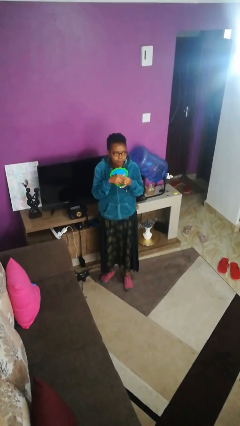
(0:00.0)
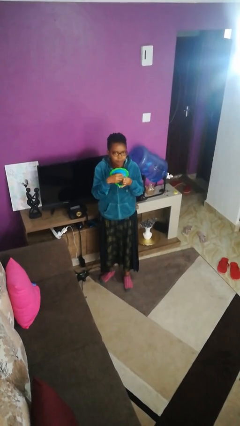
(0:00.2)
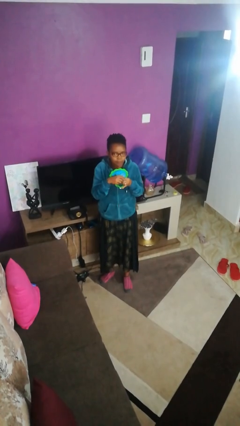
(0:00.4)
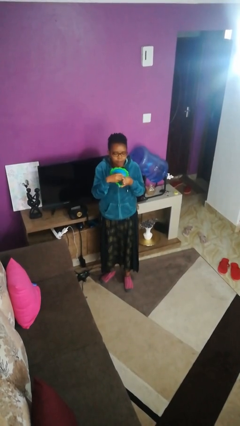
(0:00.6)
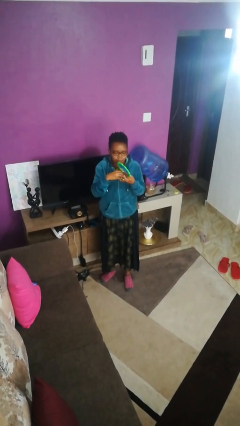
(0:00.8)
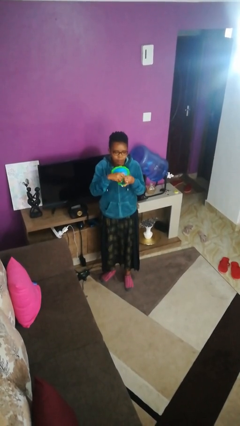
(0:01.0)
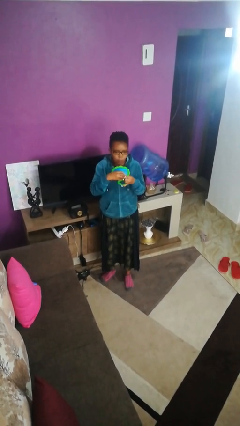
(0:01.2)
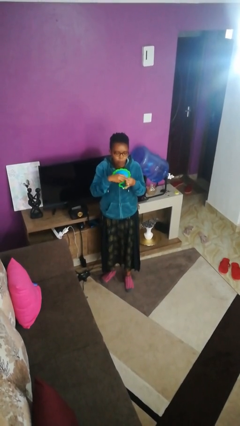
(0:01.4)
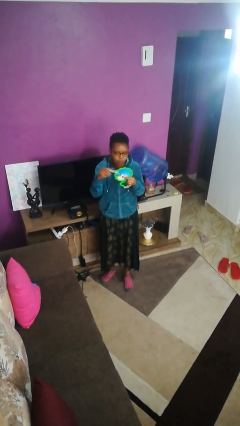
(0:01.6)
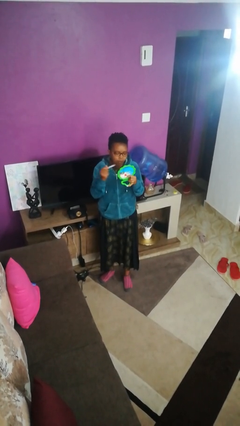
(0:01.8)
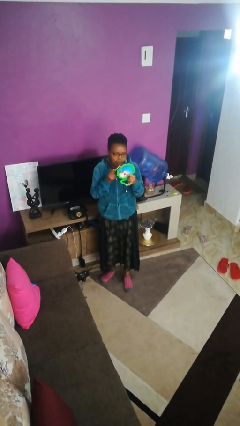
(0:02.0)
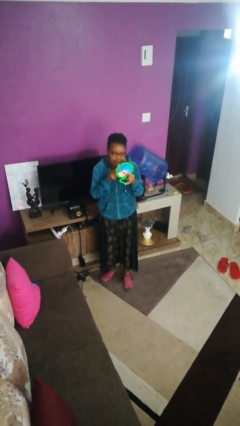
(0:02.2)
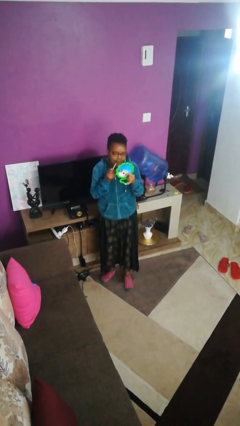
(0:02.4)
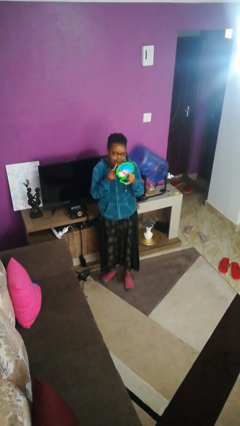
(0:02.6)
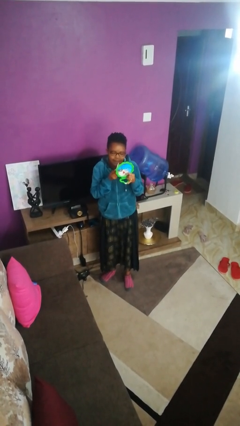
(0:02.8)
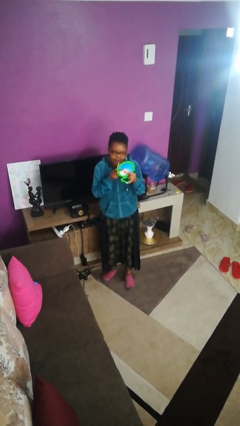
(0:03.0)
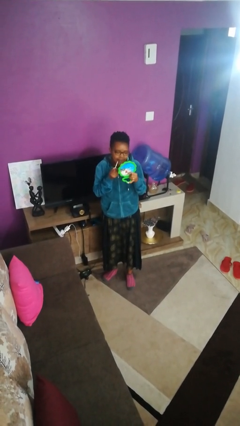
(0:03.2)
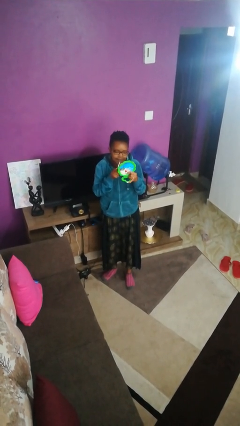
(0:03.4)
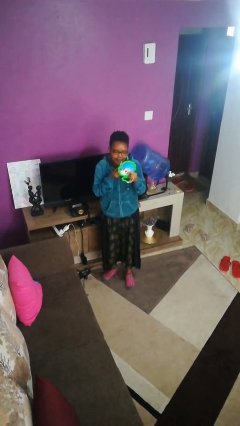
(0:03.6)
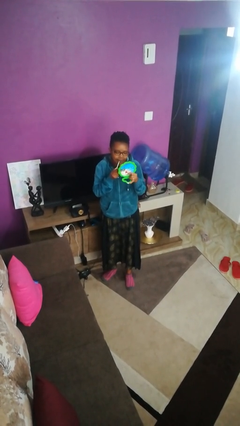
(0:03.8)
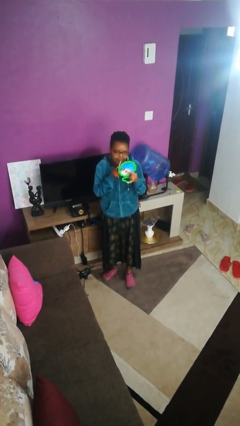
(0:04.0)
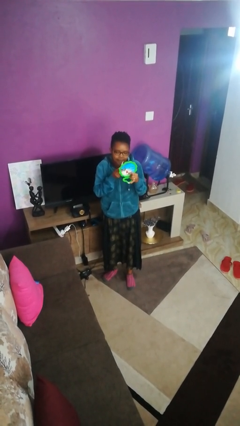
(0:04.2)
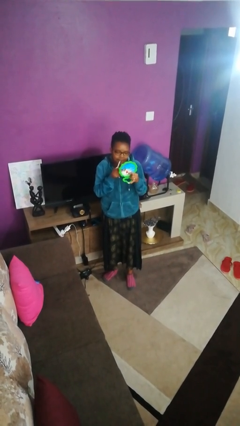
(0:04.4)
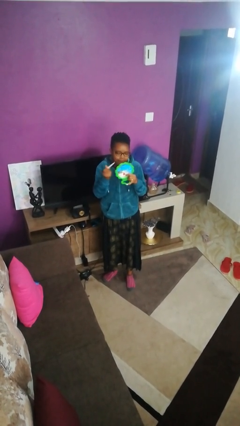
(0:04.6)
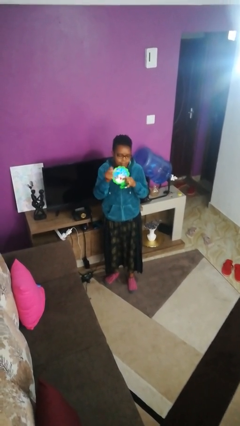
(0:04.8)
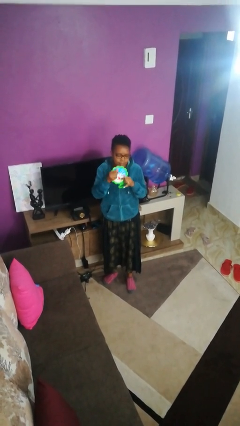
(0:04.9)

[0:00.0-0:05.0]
person applies lip makeup

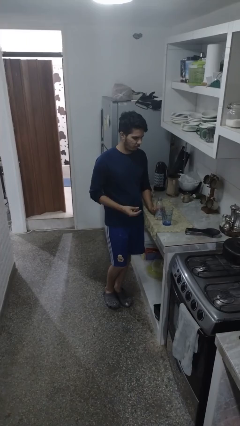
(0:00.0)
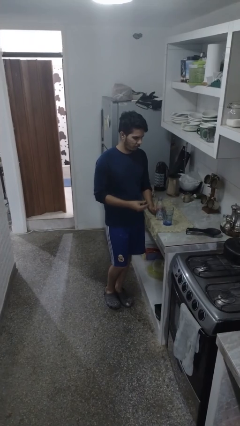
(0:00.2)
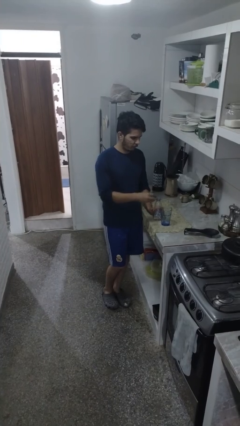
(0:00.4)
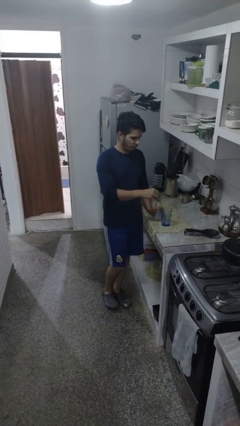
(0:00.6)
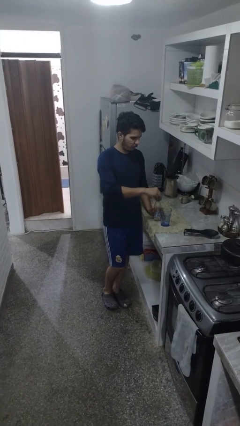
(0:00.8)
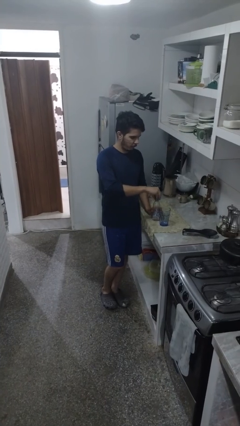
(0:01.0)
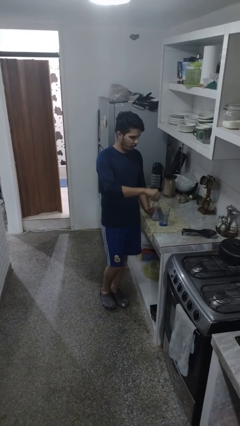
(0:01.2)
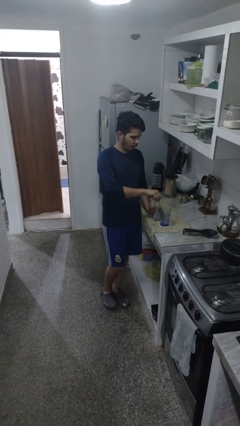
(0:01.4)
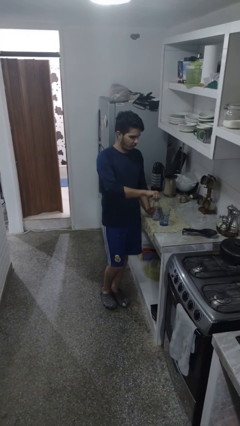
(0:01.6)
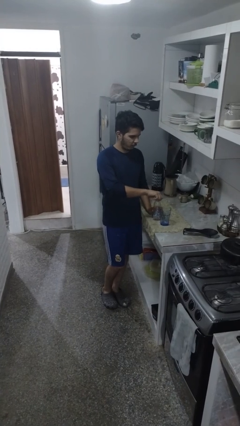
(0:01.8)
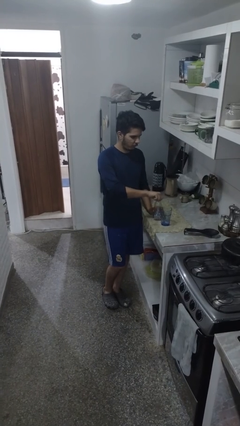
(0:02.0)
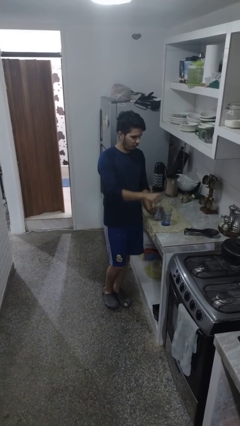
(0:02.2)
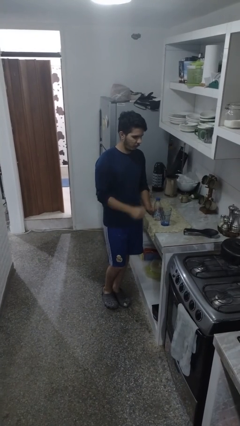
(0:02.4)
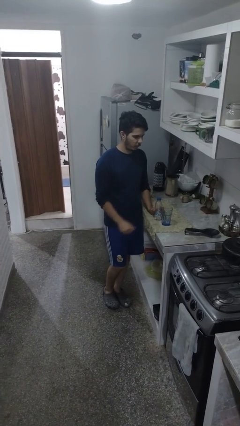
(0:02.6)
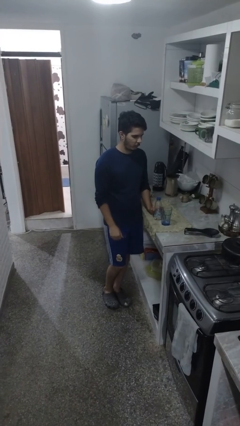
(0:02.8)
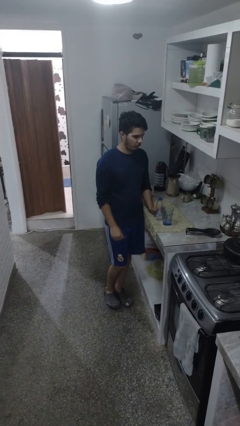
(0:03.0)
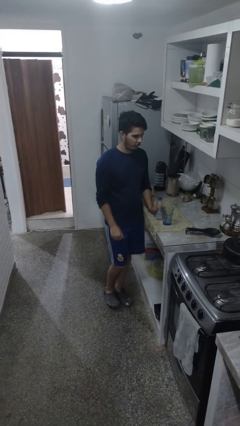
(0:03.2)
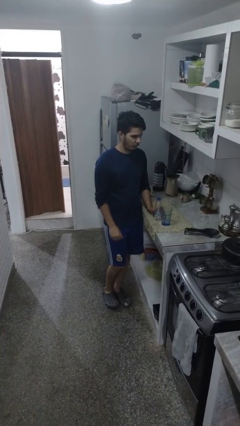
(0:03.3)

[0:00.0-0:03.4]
person screws lid to bottle

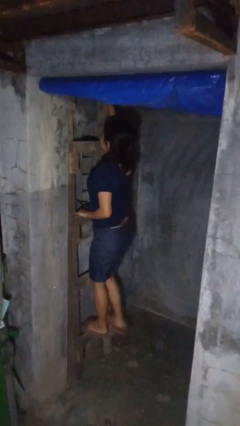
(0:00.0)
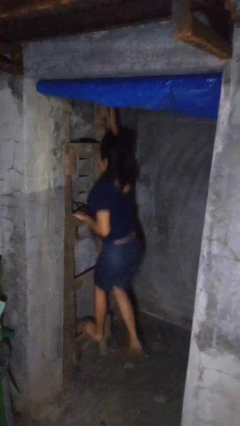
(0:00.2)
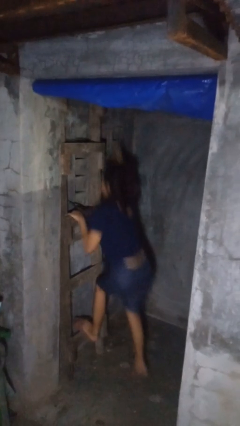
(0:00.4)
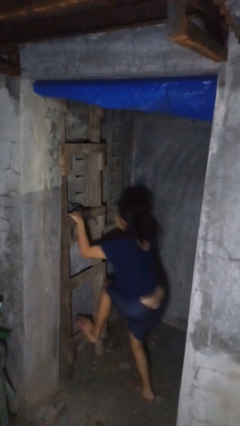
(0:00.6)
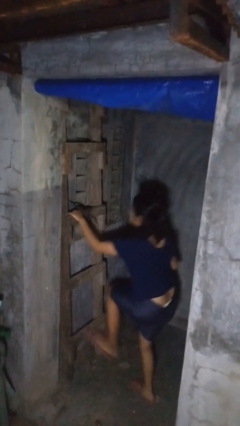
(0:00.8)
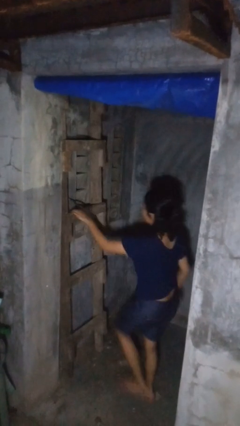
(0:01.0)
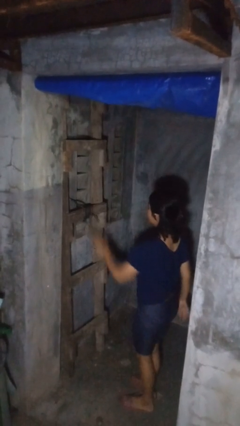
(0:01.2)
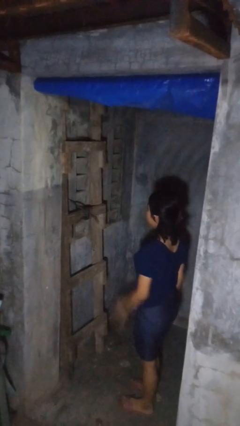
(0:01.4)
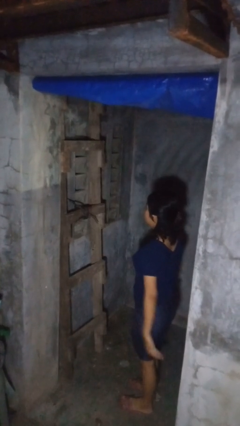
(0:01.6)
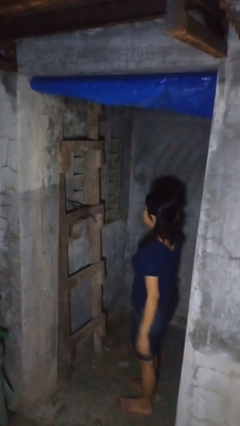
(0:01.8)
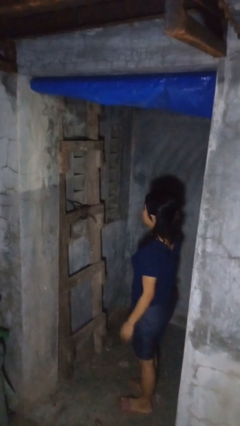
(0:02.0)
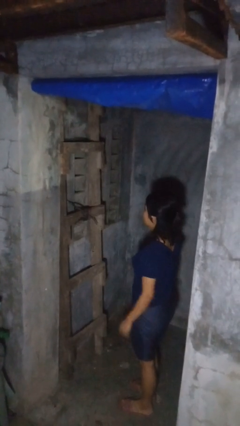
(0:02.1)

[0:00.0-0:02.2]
person climbs down ladder

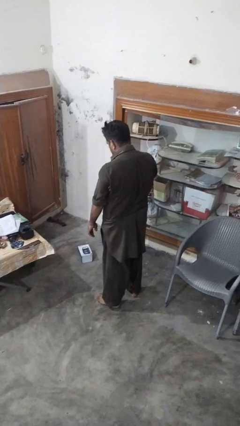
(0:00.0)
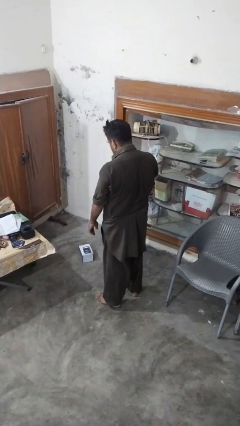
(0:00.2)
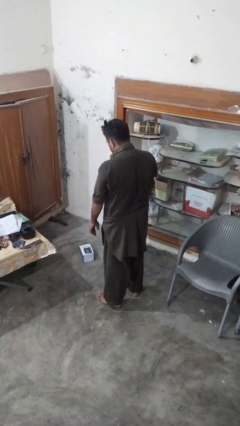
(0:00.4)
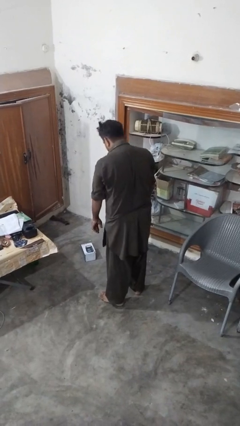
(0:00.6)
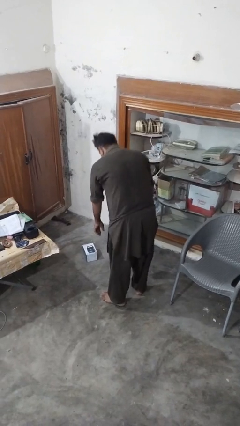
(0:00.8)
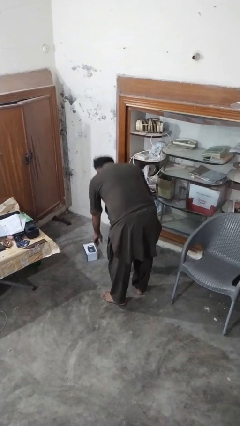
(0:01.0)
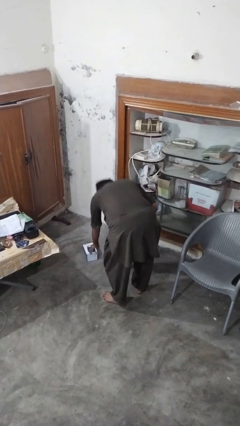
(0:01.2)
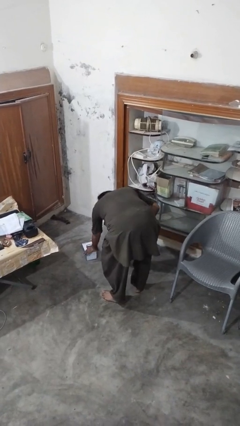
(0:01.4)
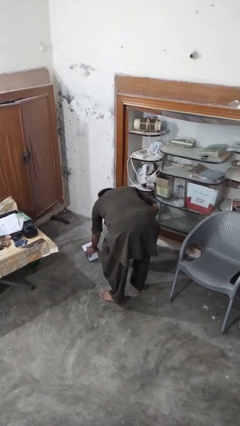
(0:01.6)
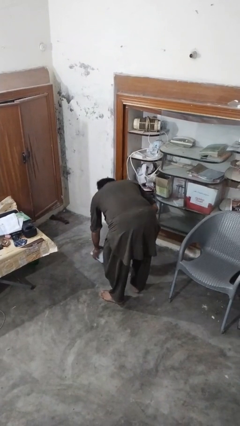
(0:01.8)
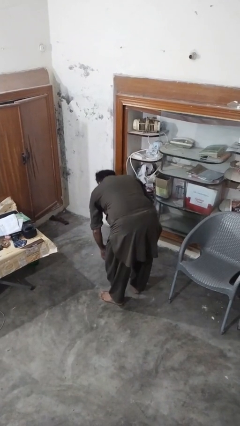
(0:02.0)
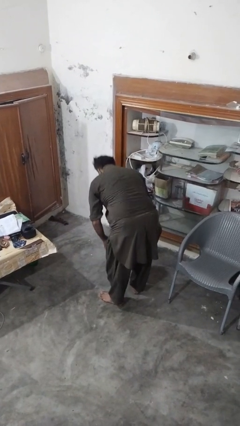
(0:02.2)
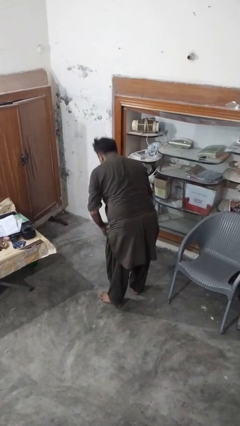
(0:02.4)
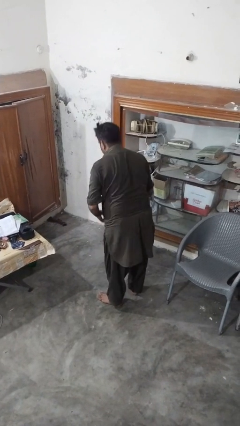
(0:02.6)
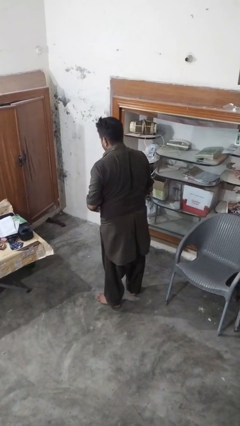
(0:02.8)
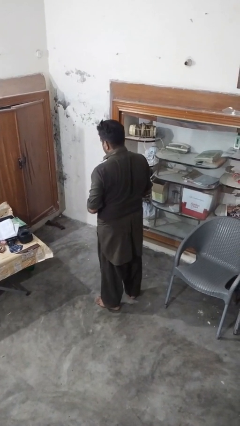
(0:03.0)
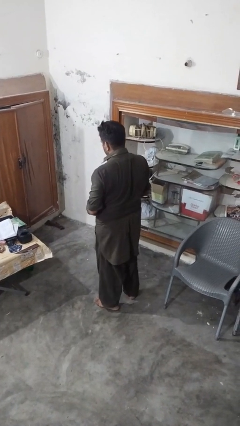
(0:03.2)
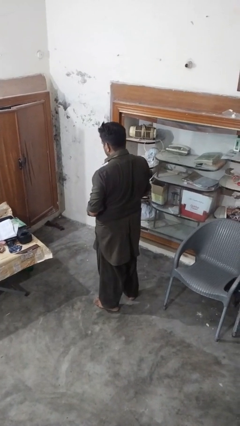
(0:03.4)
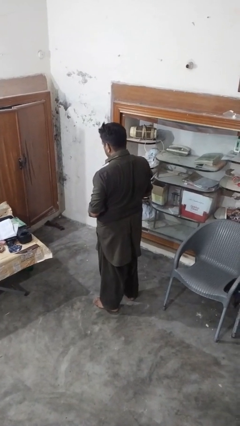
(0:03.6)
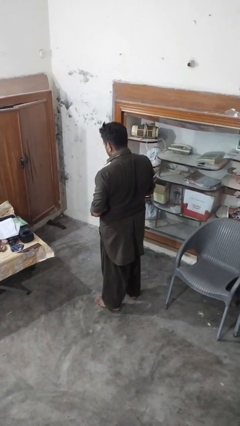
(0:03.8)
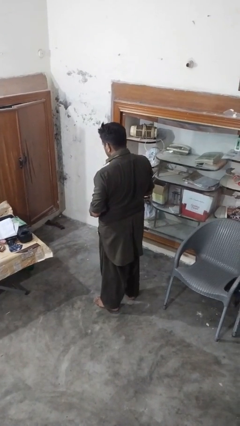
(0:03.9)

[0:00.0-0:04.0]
person picks up object from floor

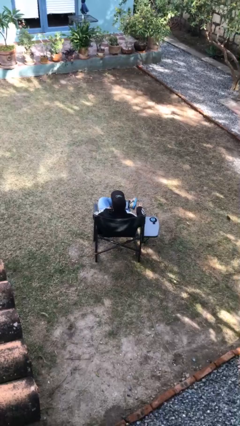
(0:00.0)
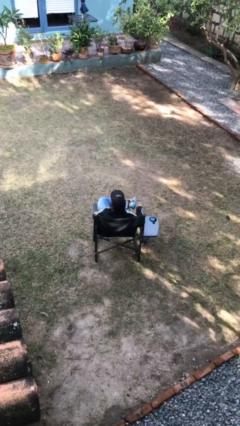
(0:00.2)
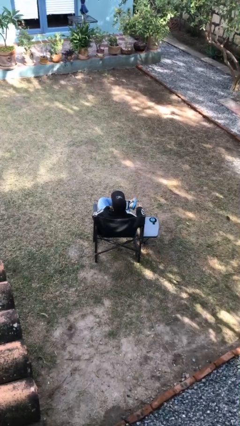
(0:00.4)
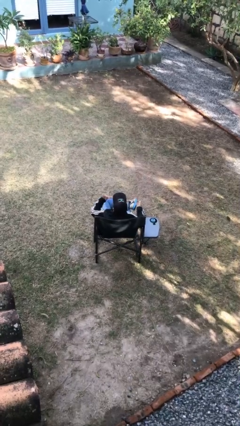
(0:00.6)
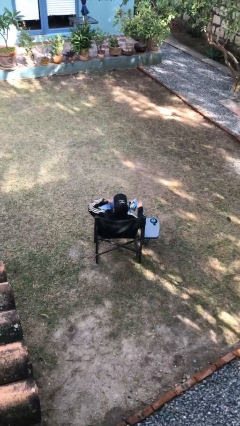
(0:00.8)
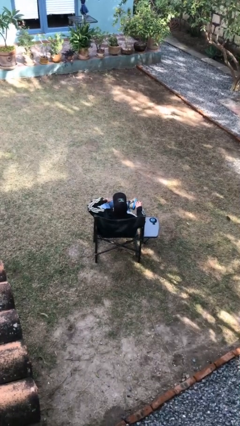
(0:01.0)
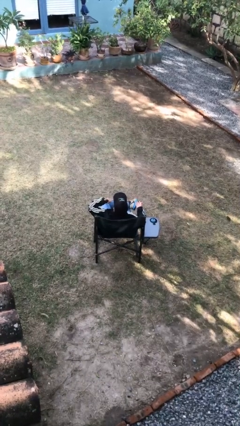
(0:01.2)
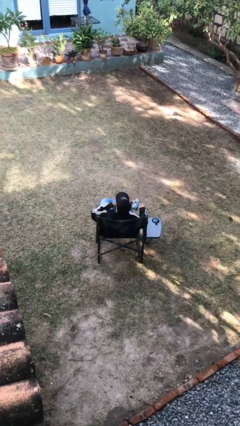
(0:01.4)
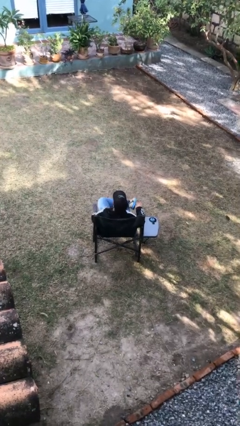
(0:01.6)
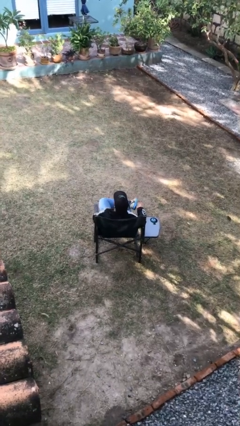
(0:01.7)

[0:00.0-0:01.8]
person gestures call me

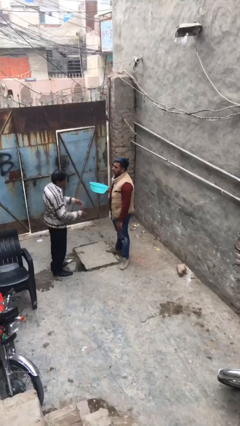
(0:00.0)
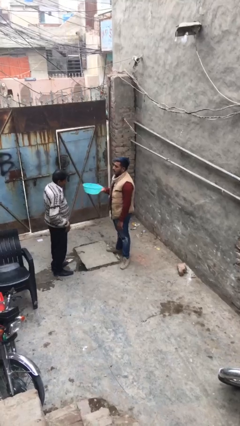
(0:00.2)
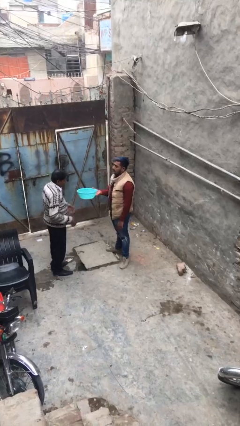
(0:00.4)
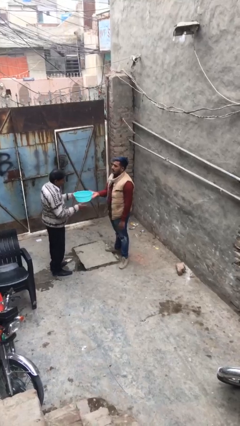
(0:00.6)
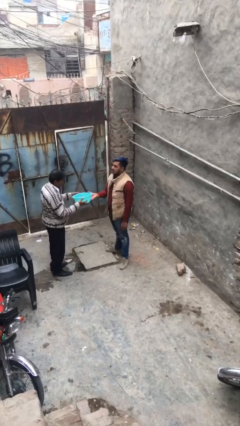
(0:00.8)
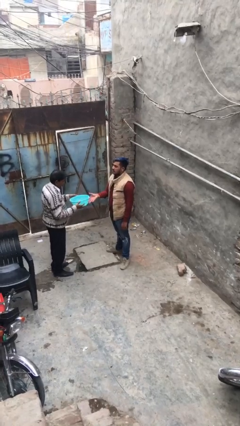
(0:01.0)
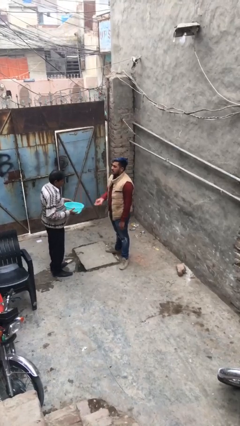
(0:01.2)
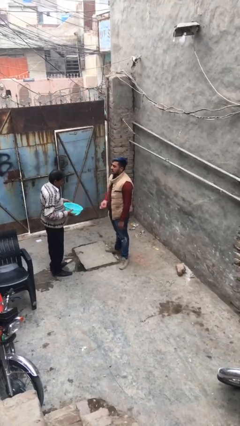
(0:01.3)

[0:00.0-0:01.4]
person transfers object to person
